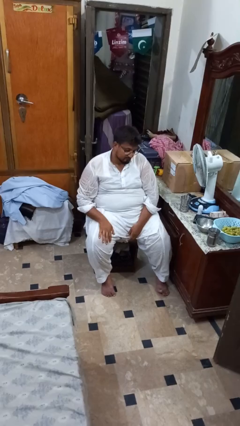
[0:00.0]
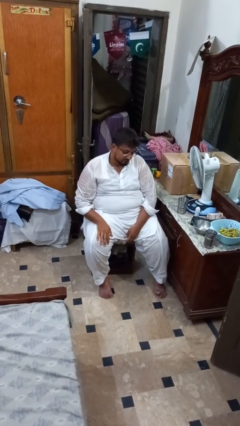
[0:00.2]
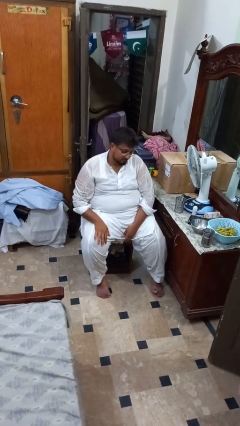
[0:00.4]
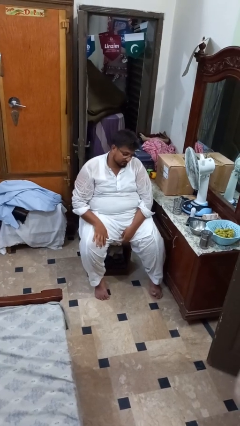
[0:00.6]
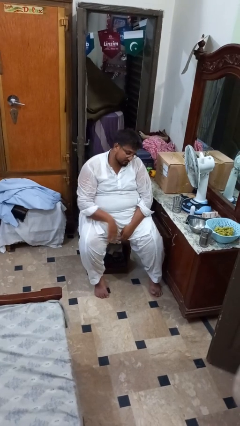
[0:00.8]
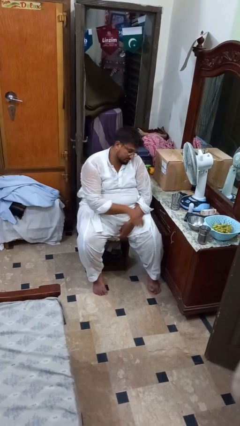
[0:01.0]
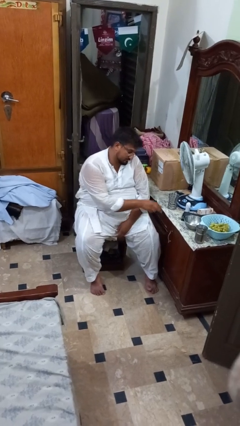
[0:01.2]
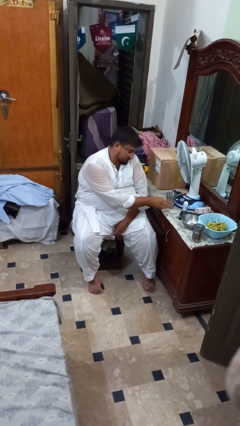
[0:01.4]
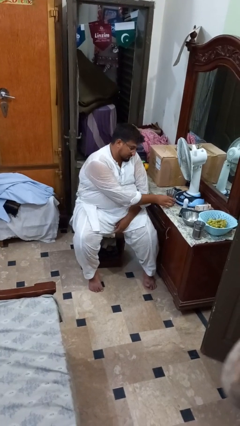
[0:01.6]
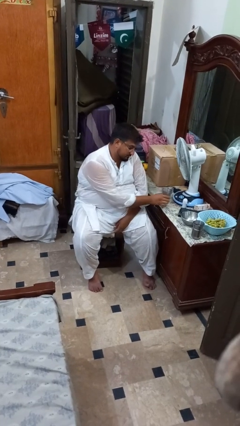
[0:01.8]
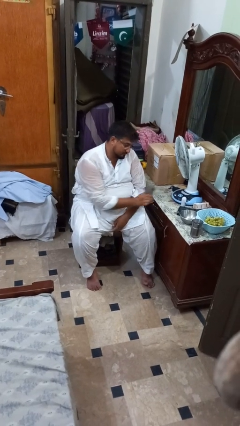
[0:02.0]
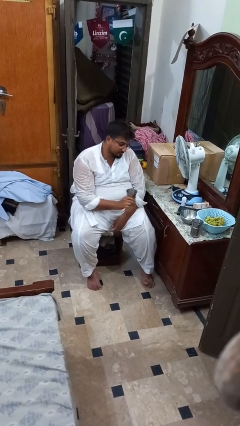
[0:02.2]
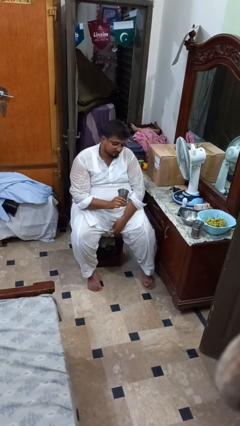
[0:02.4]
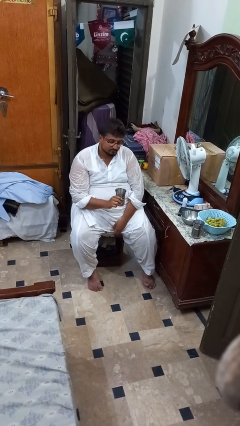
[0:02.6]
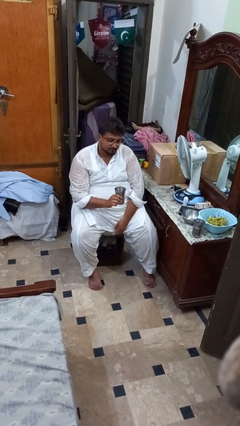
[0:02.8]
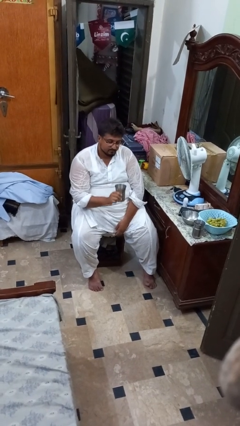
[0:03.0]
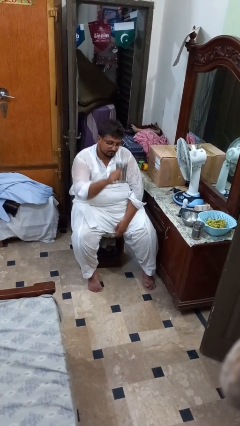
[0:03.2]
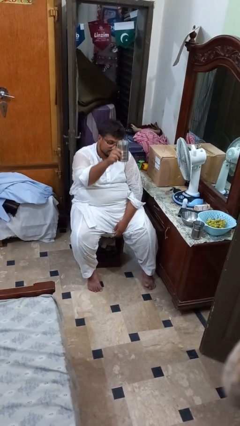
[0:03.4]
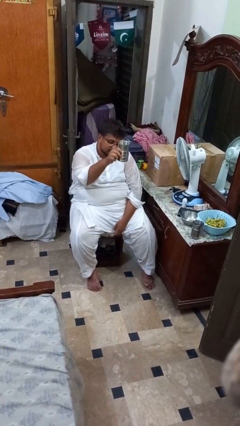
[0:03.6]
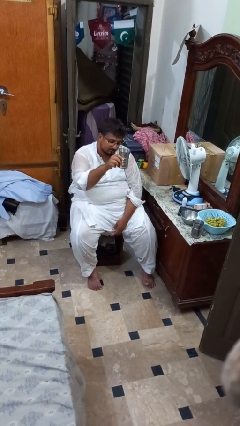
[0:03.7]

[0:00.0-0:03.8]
person picks up object from table

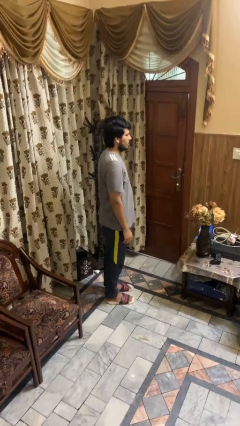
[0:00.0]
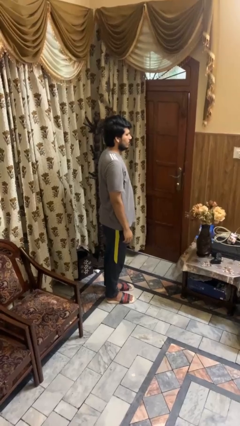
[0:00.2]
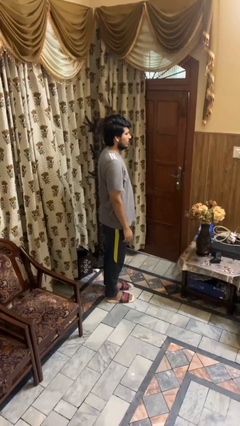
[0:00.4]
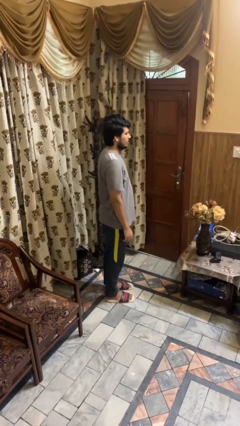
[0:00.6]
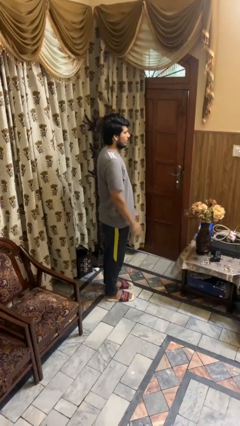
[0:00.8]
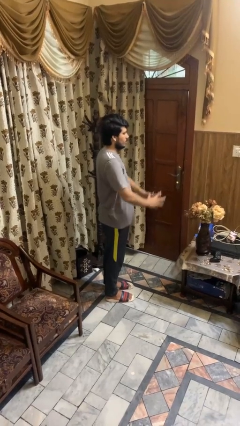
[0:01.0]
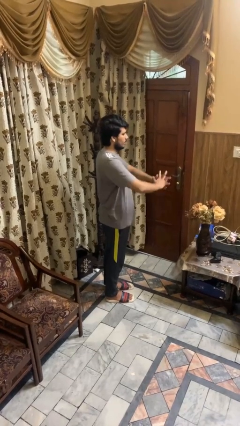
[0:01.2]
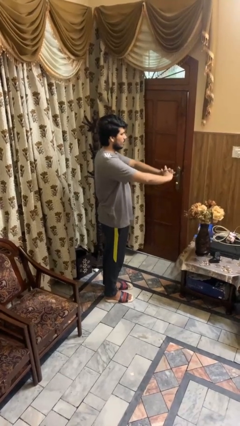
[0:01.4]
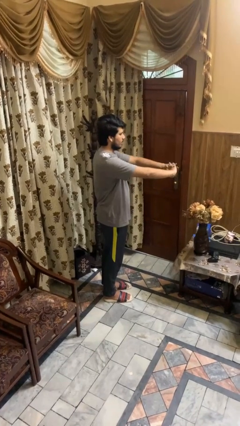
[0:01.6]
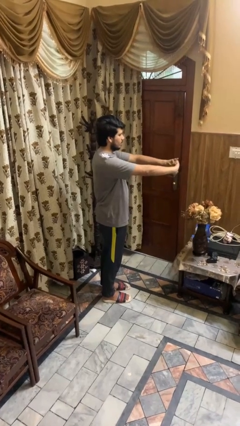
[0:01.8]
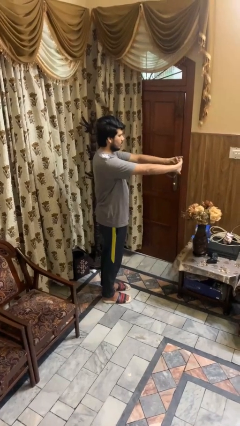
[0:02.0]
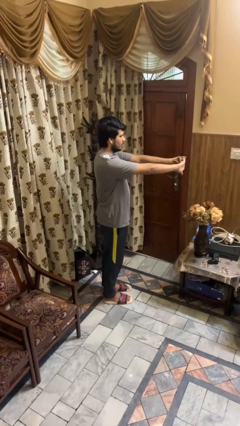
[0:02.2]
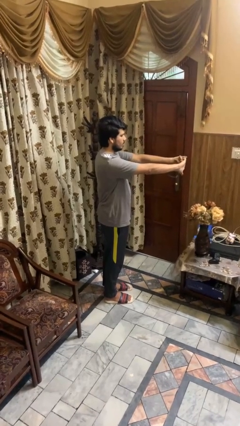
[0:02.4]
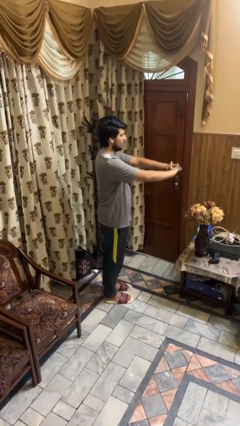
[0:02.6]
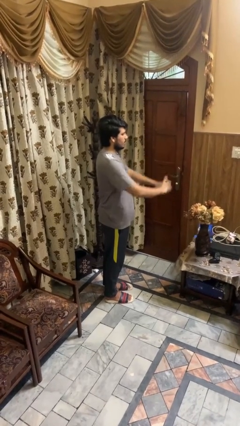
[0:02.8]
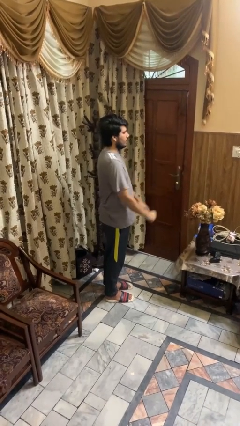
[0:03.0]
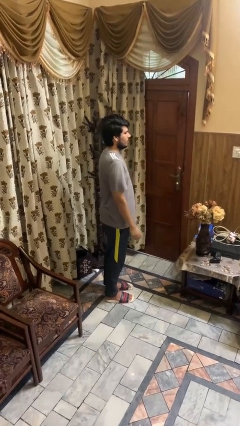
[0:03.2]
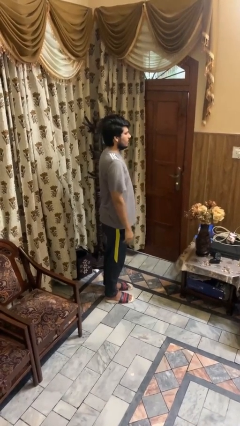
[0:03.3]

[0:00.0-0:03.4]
person cracks knuckles

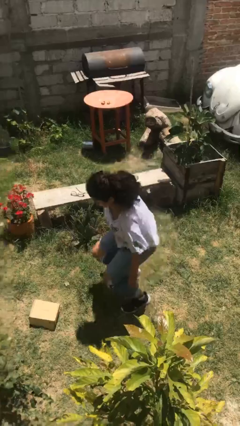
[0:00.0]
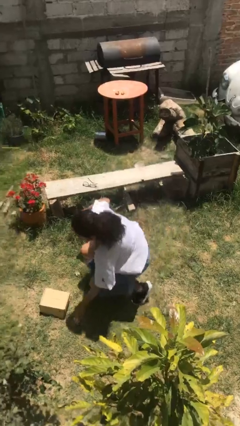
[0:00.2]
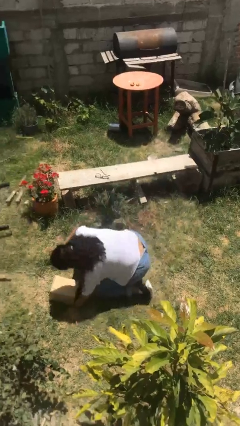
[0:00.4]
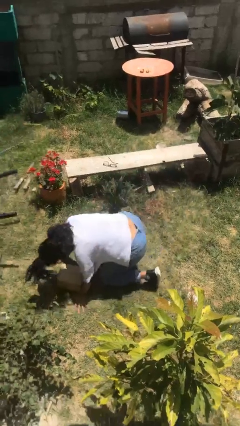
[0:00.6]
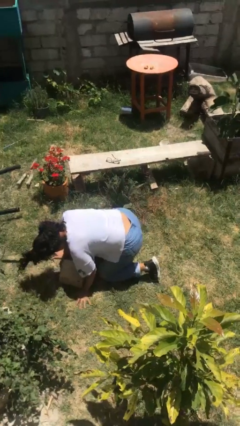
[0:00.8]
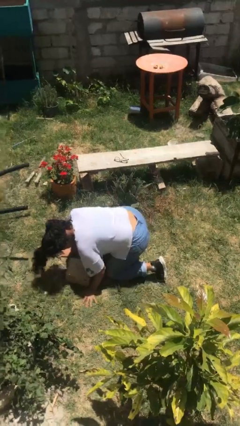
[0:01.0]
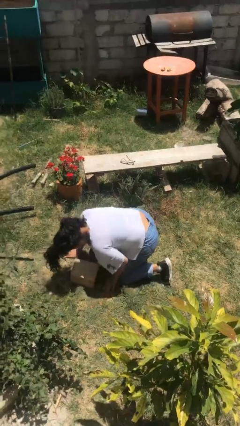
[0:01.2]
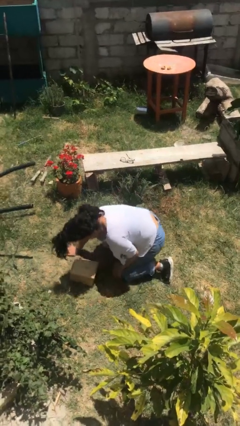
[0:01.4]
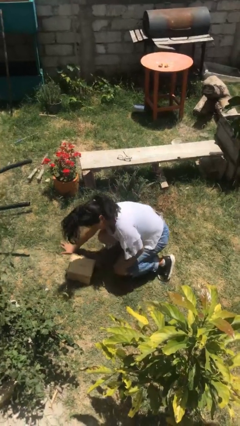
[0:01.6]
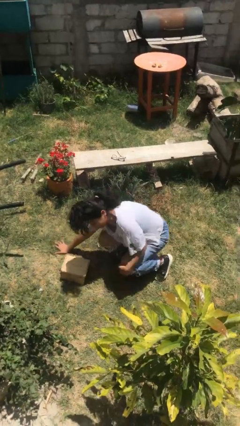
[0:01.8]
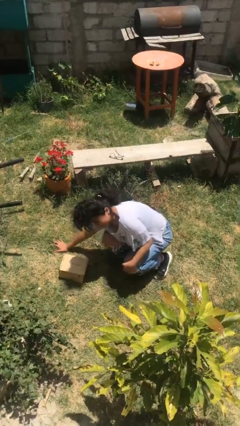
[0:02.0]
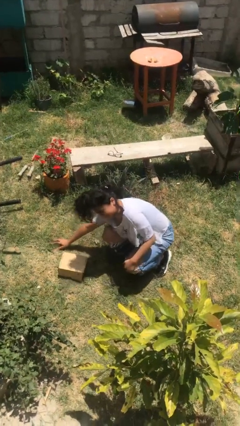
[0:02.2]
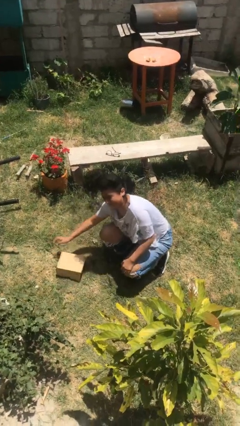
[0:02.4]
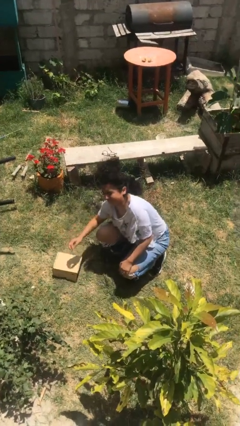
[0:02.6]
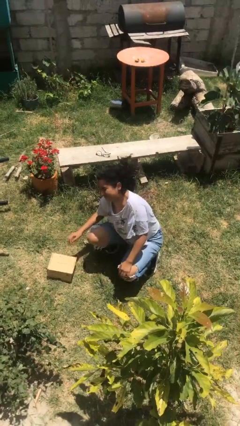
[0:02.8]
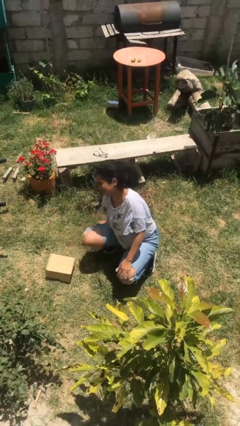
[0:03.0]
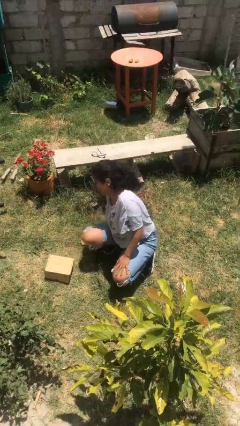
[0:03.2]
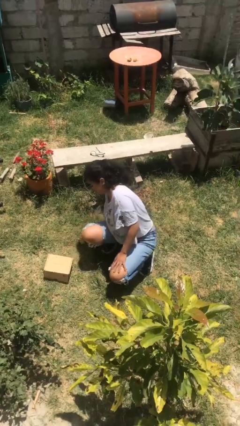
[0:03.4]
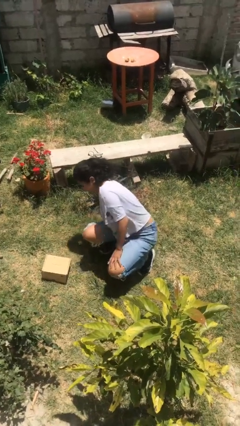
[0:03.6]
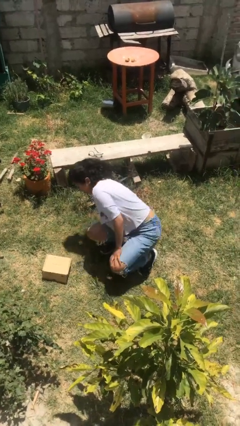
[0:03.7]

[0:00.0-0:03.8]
person lies down on floor

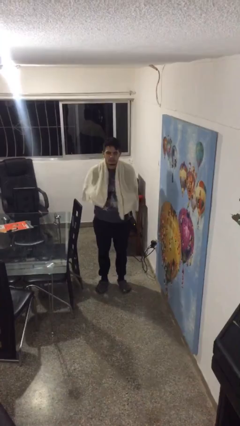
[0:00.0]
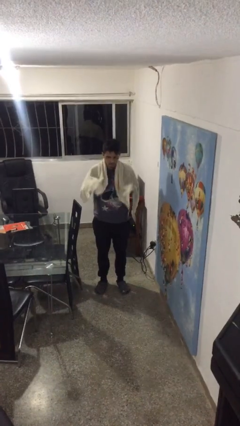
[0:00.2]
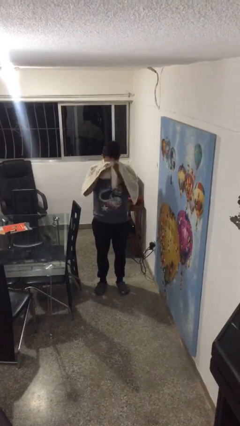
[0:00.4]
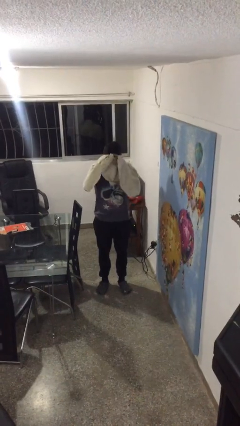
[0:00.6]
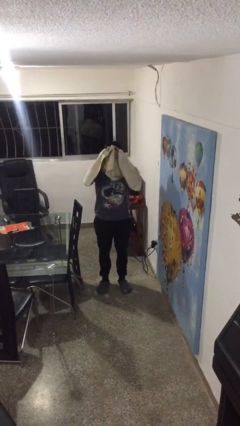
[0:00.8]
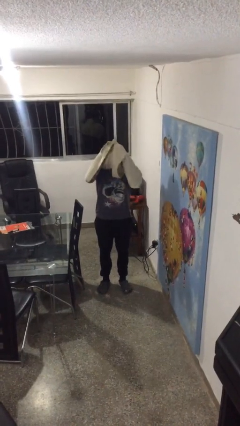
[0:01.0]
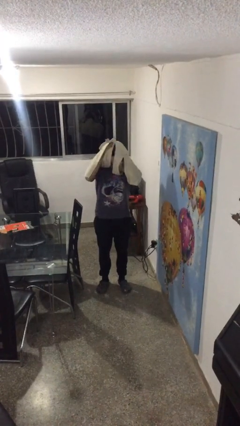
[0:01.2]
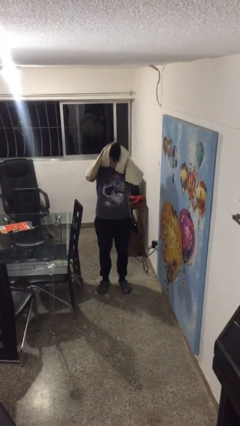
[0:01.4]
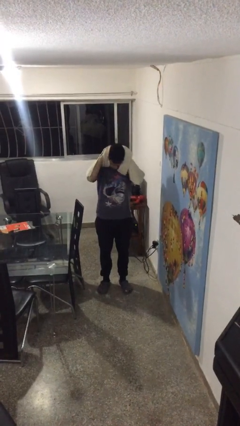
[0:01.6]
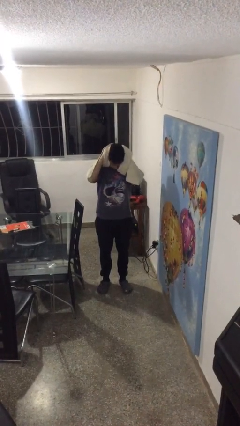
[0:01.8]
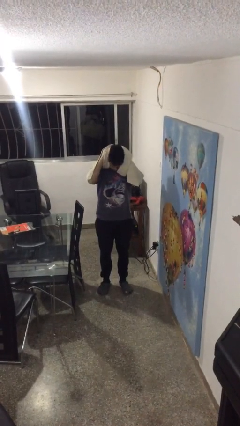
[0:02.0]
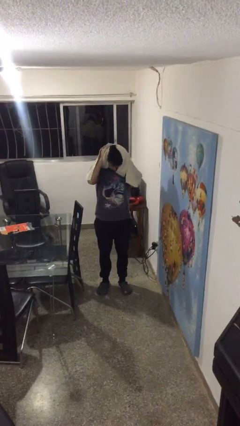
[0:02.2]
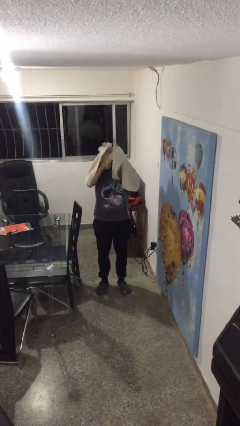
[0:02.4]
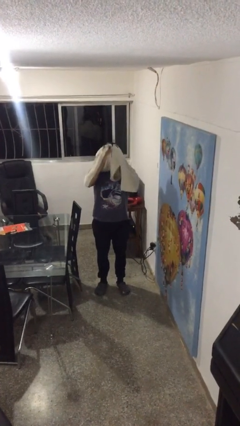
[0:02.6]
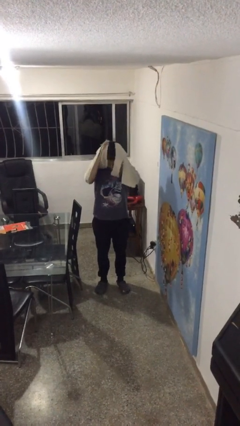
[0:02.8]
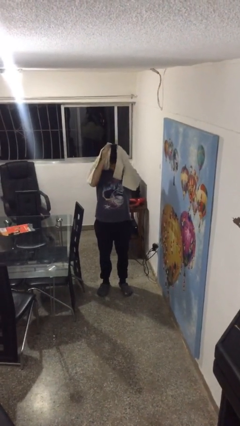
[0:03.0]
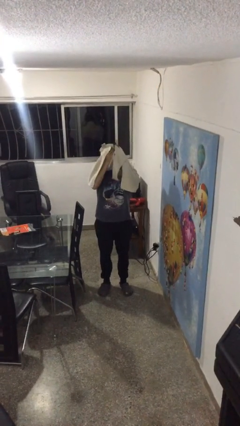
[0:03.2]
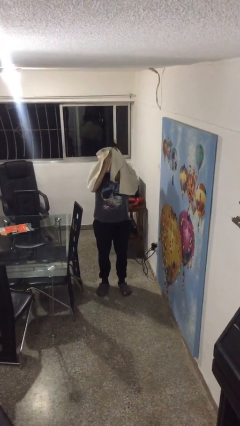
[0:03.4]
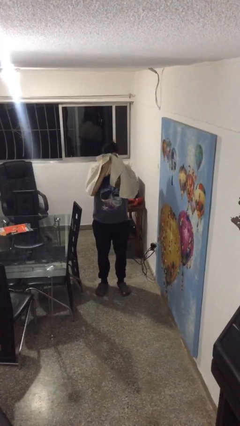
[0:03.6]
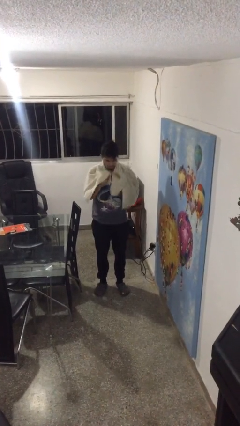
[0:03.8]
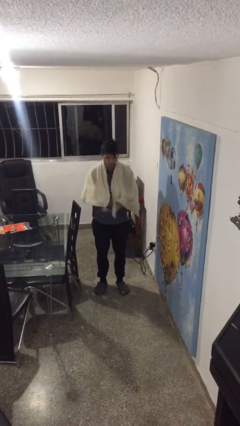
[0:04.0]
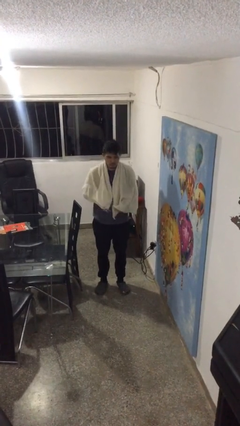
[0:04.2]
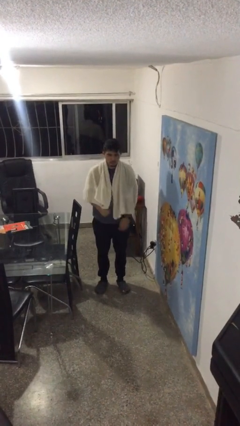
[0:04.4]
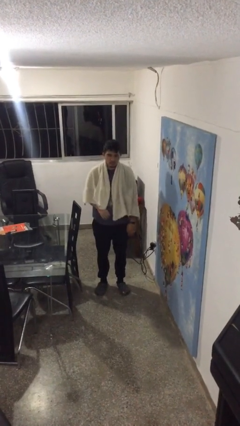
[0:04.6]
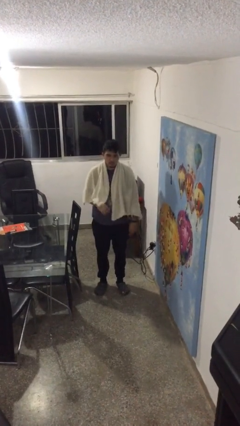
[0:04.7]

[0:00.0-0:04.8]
person dries hair with towel

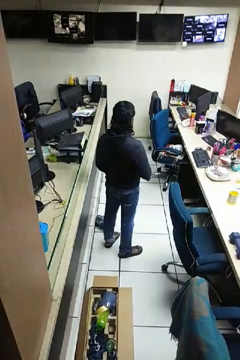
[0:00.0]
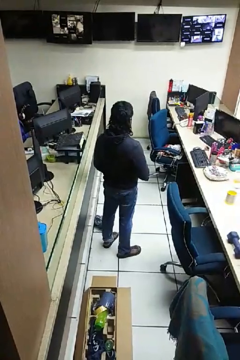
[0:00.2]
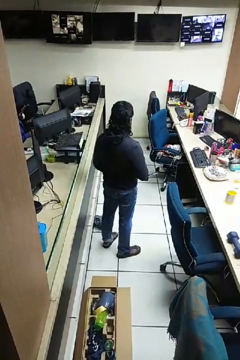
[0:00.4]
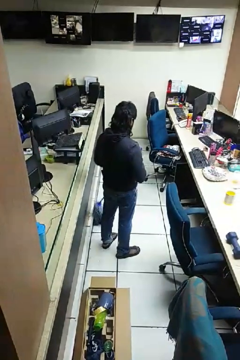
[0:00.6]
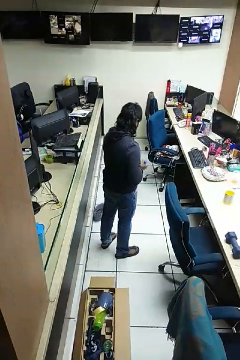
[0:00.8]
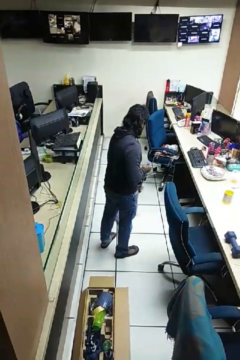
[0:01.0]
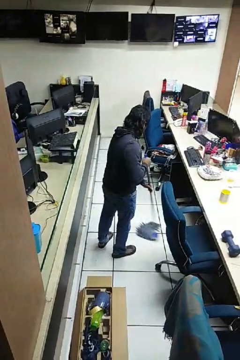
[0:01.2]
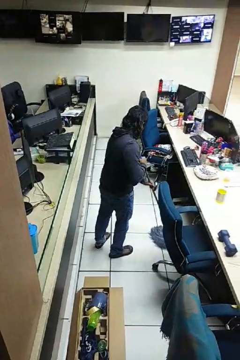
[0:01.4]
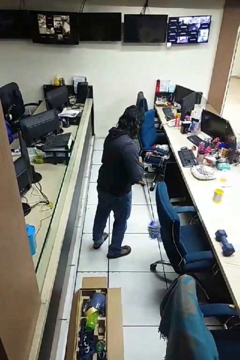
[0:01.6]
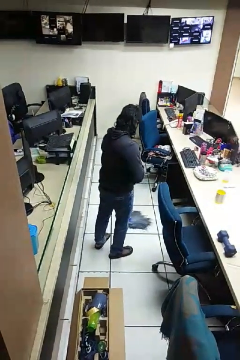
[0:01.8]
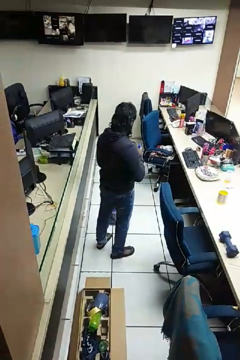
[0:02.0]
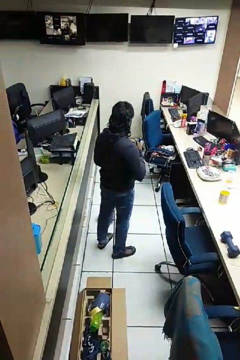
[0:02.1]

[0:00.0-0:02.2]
person mops

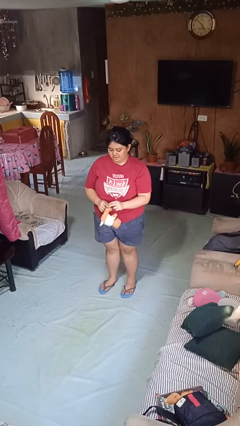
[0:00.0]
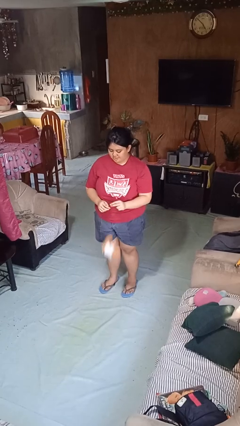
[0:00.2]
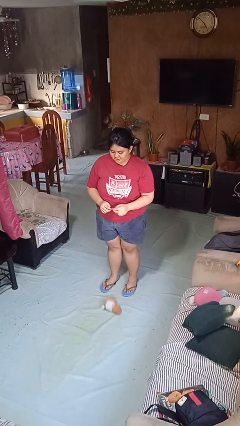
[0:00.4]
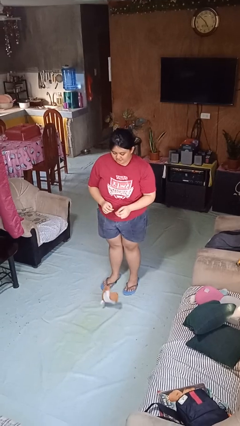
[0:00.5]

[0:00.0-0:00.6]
person drops object
